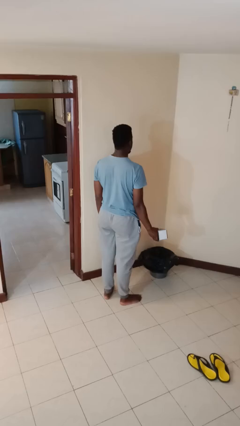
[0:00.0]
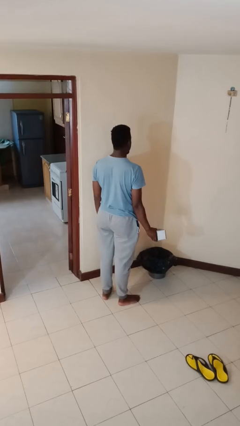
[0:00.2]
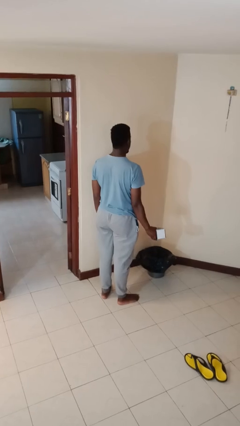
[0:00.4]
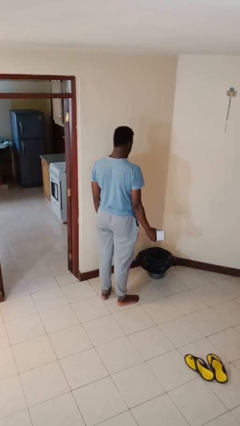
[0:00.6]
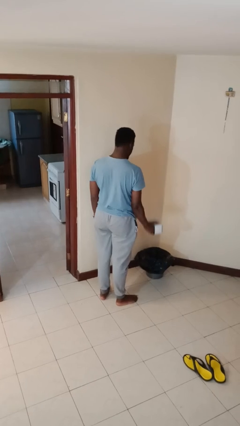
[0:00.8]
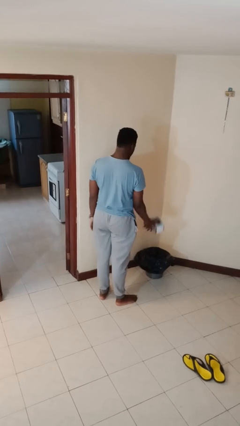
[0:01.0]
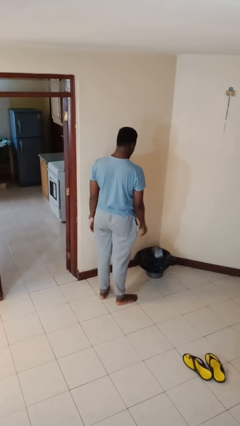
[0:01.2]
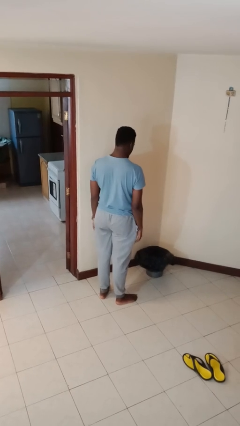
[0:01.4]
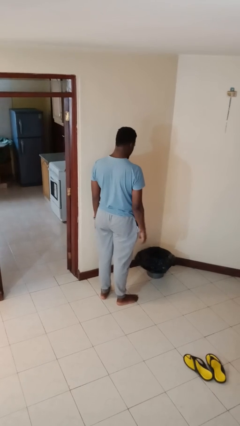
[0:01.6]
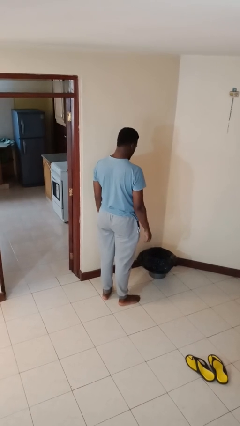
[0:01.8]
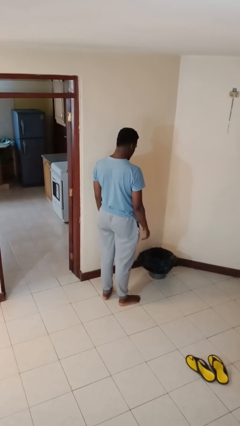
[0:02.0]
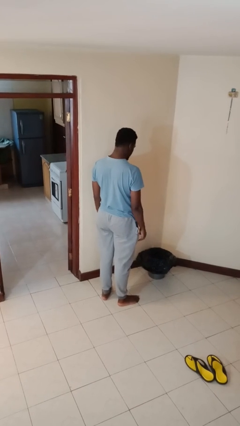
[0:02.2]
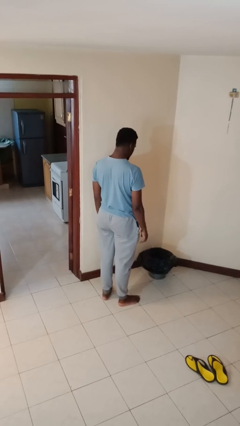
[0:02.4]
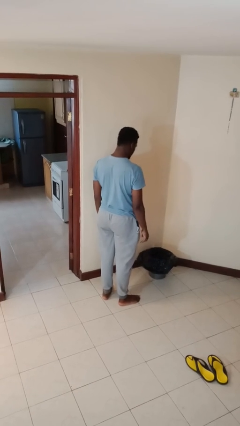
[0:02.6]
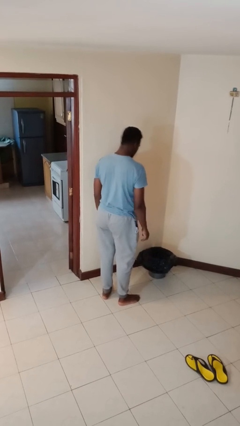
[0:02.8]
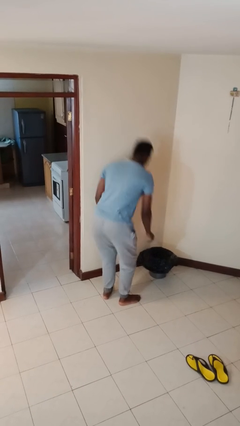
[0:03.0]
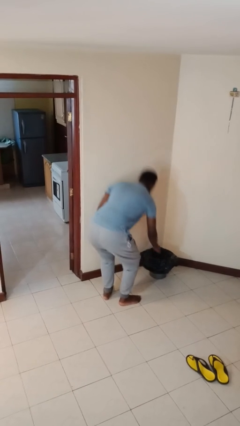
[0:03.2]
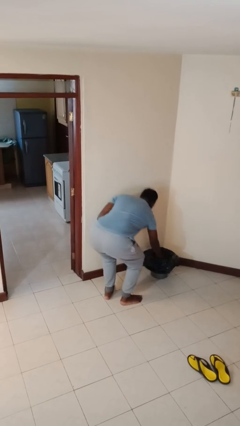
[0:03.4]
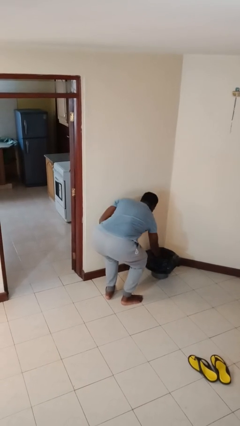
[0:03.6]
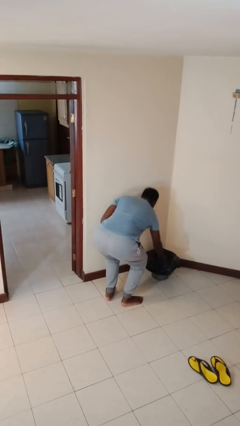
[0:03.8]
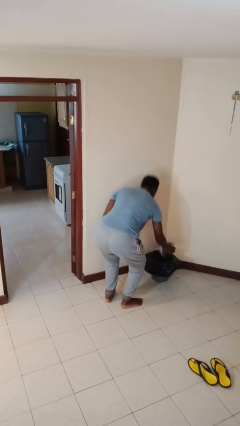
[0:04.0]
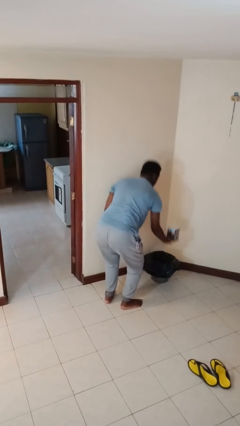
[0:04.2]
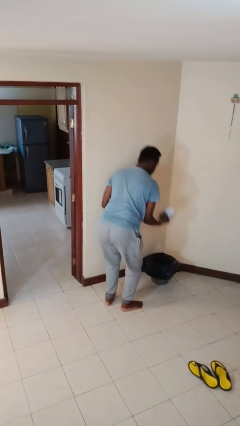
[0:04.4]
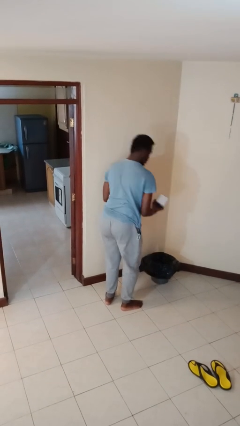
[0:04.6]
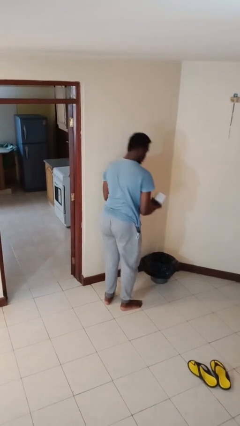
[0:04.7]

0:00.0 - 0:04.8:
person discards trash

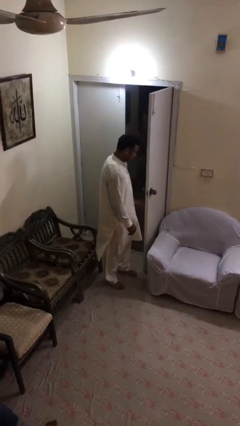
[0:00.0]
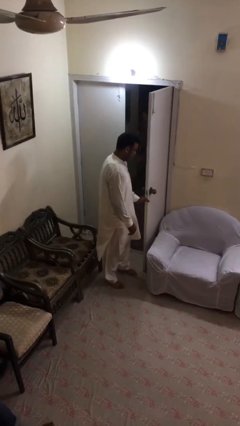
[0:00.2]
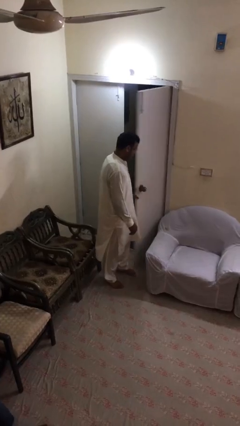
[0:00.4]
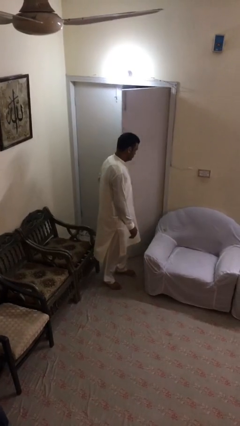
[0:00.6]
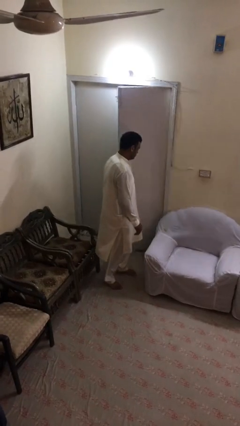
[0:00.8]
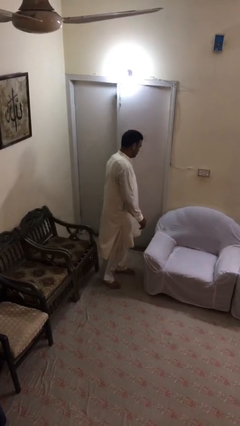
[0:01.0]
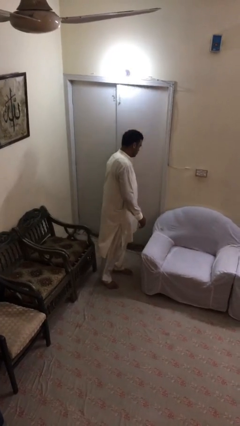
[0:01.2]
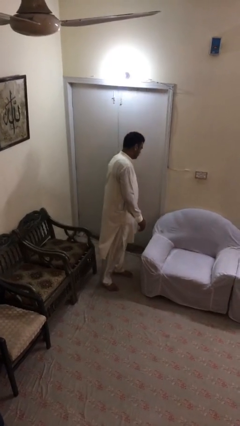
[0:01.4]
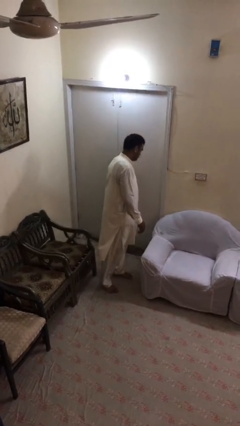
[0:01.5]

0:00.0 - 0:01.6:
person closes facility door

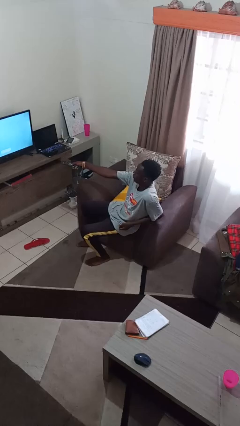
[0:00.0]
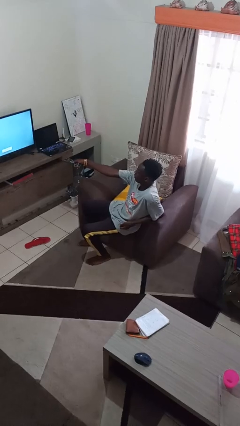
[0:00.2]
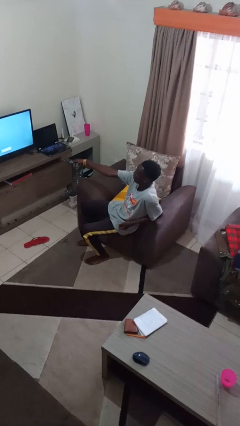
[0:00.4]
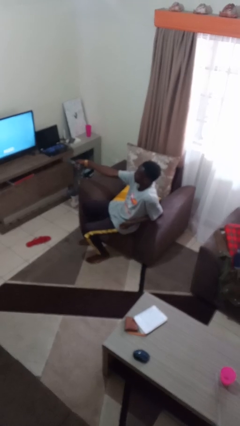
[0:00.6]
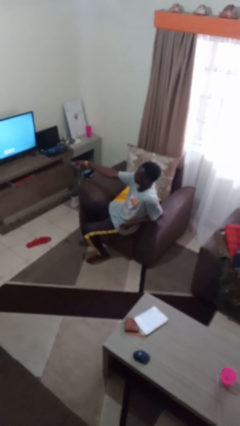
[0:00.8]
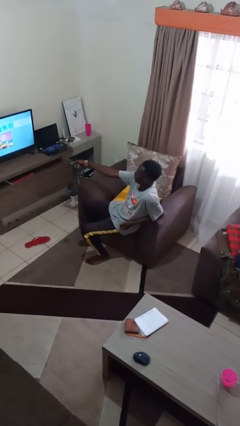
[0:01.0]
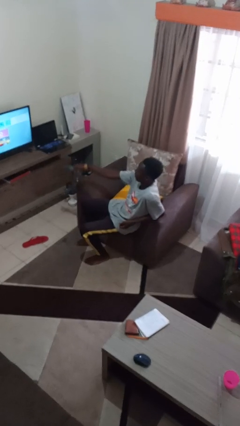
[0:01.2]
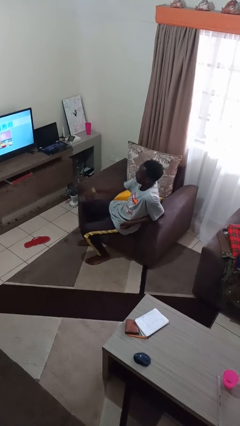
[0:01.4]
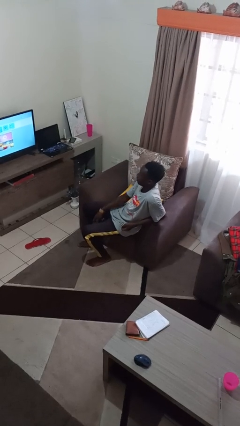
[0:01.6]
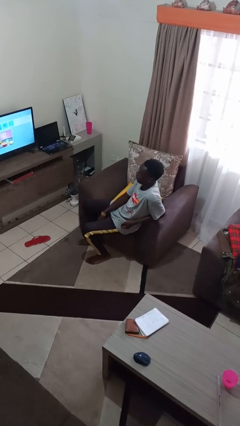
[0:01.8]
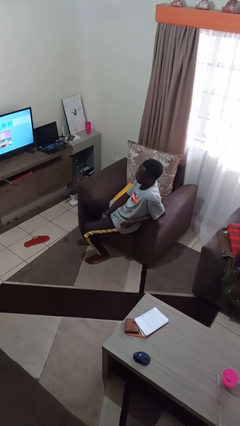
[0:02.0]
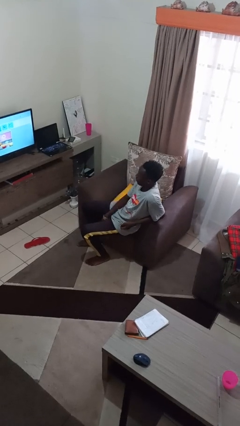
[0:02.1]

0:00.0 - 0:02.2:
person uses television remote

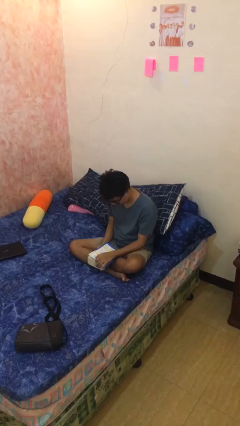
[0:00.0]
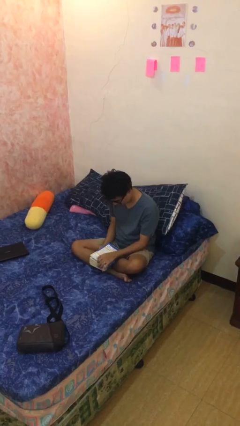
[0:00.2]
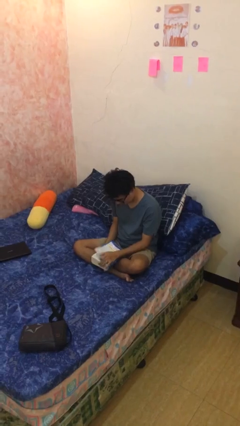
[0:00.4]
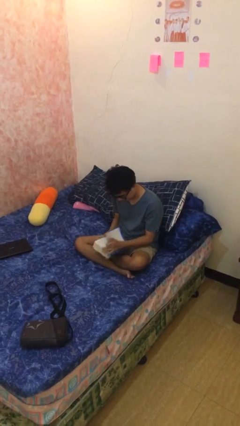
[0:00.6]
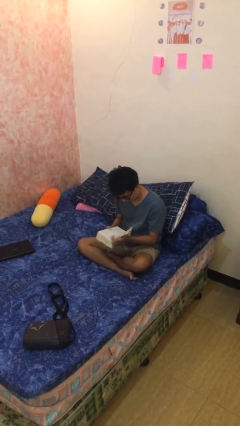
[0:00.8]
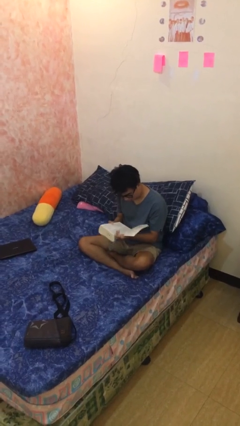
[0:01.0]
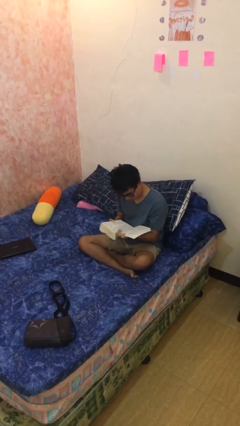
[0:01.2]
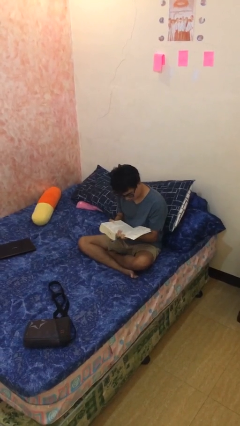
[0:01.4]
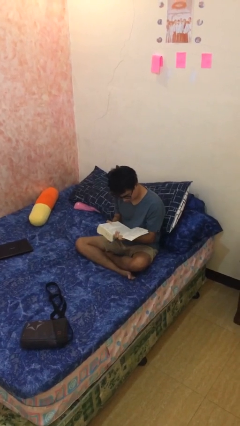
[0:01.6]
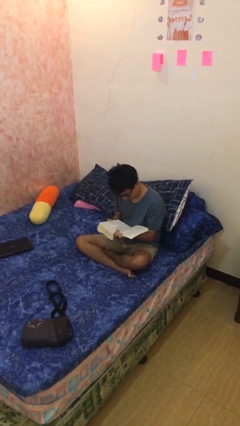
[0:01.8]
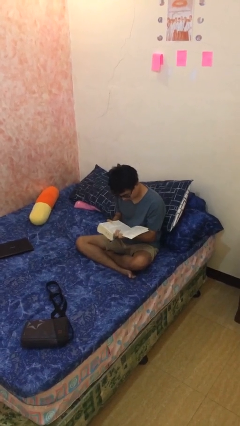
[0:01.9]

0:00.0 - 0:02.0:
person reads document

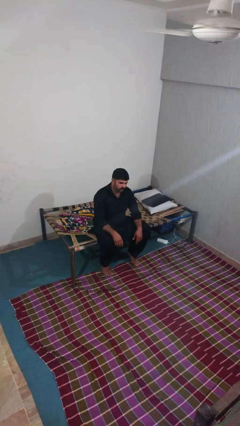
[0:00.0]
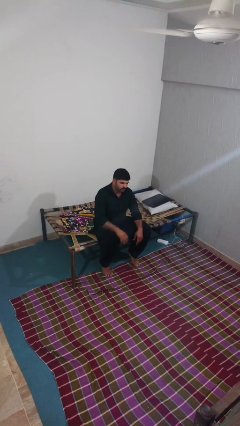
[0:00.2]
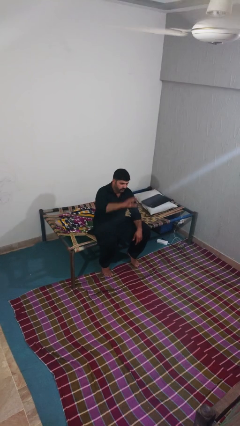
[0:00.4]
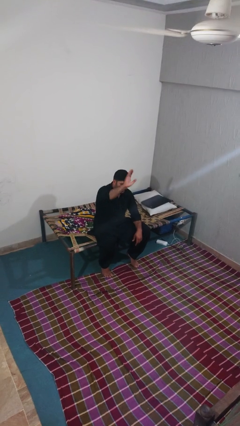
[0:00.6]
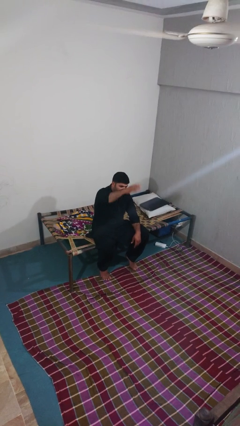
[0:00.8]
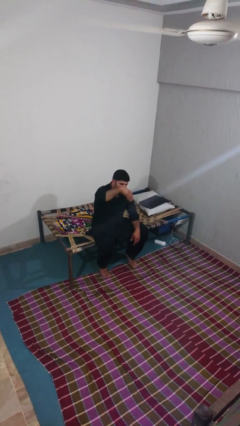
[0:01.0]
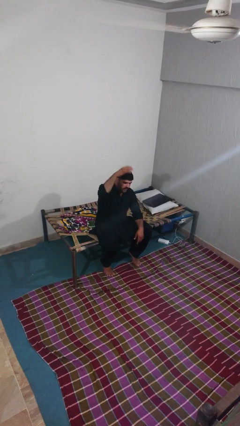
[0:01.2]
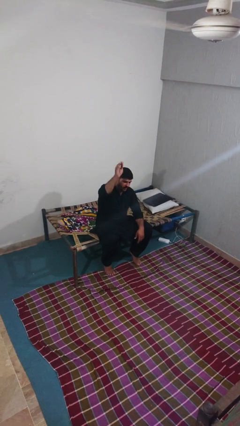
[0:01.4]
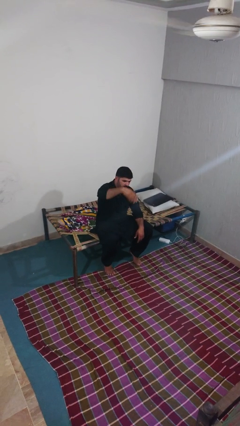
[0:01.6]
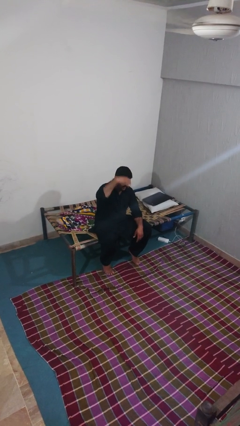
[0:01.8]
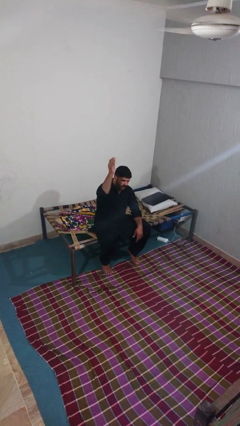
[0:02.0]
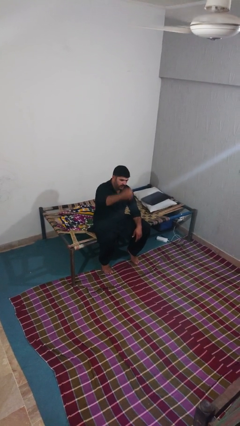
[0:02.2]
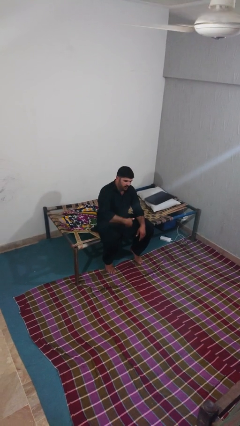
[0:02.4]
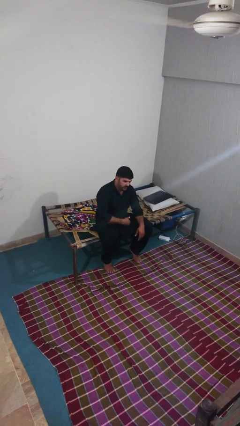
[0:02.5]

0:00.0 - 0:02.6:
person gestures come here

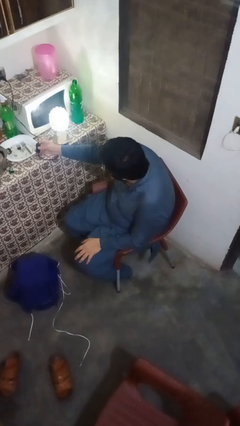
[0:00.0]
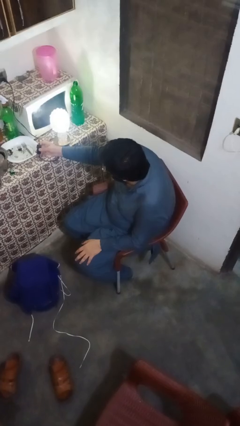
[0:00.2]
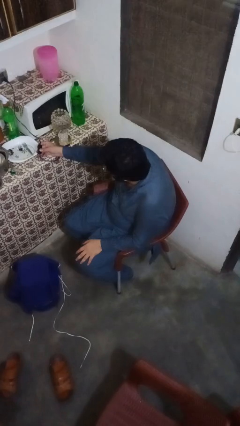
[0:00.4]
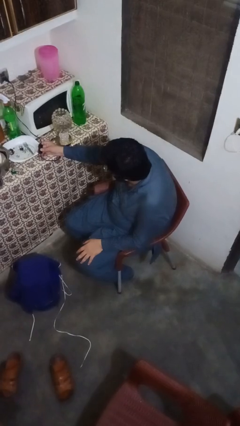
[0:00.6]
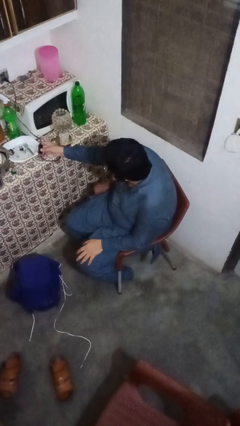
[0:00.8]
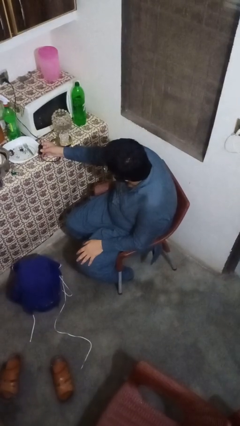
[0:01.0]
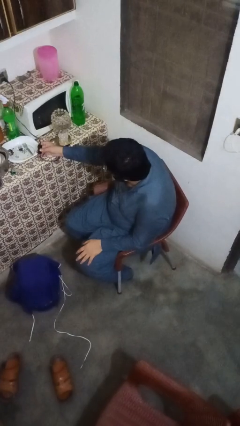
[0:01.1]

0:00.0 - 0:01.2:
person turns off lamp

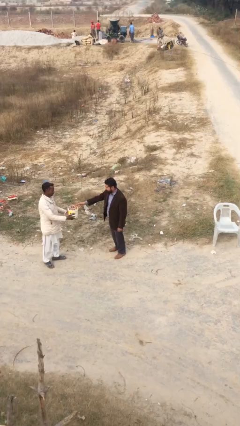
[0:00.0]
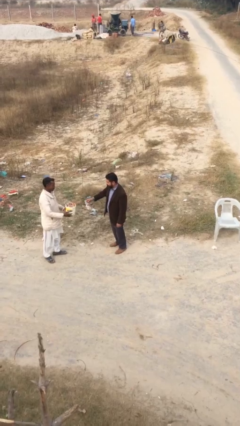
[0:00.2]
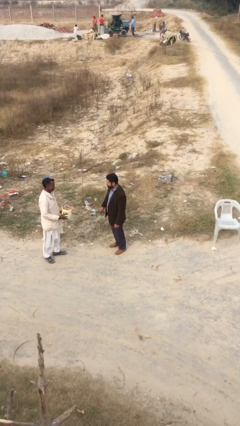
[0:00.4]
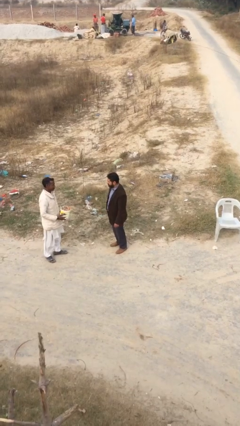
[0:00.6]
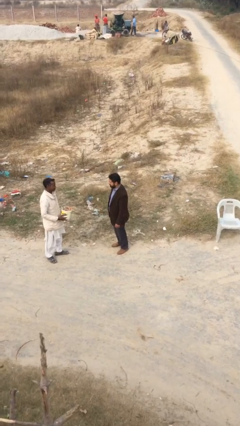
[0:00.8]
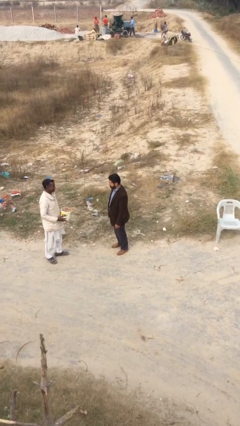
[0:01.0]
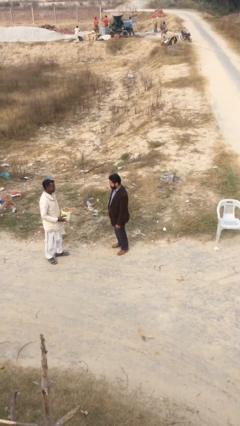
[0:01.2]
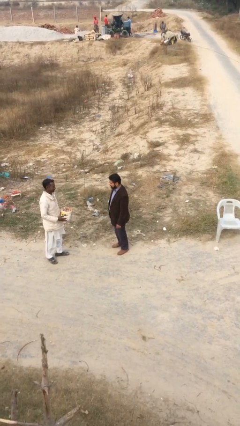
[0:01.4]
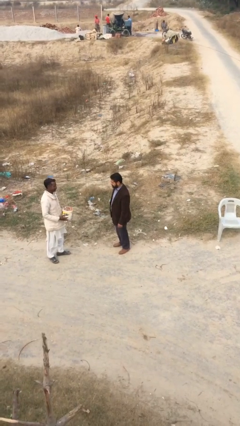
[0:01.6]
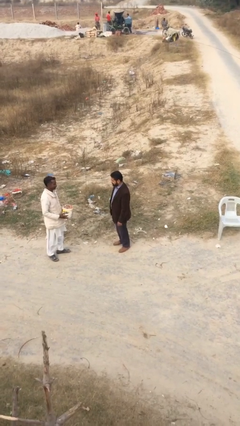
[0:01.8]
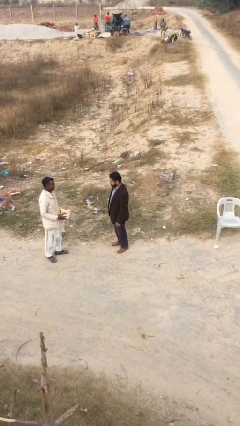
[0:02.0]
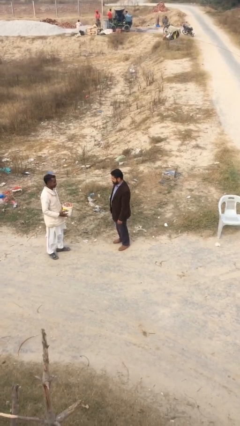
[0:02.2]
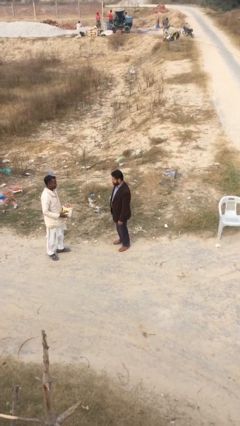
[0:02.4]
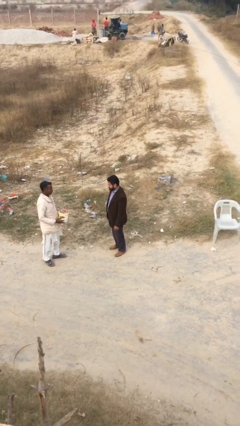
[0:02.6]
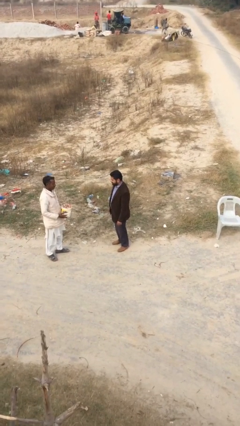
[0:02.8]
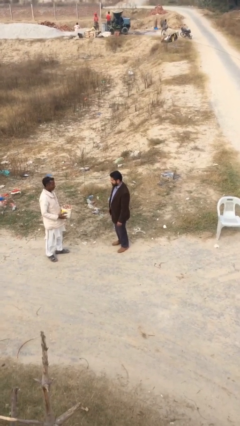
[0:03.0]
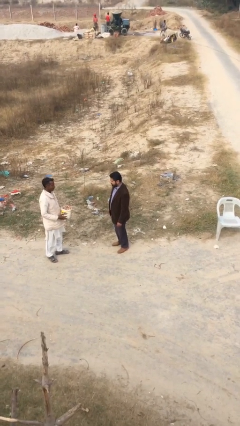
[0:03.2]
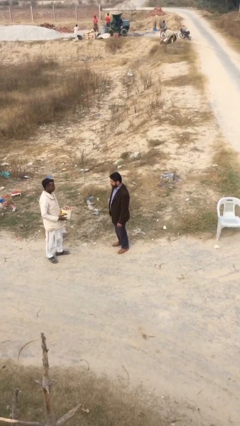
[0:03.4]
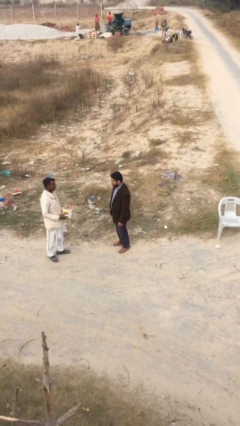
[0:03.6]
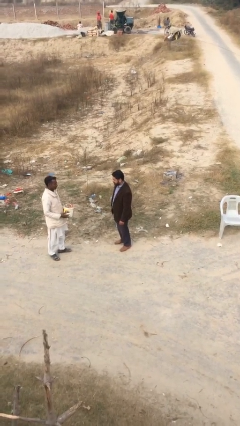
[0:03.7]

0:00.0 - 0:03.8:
person transfers object to person
